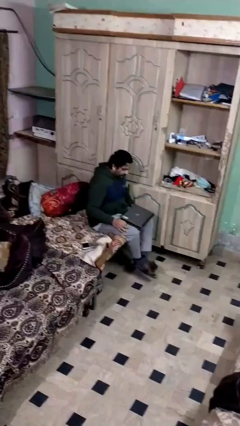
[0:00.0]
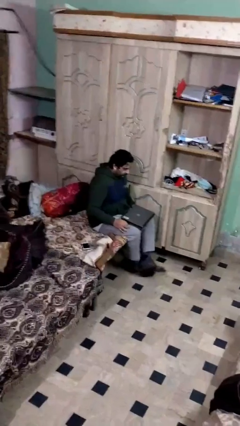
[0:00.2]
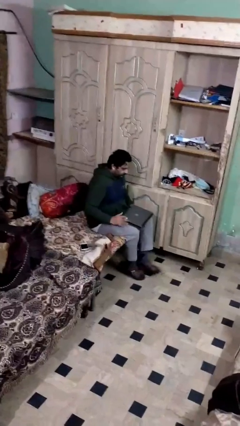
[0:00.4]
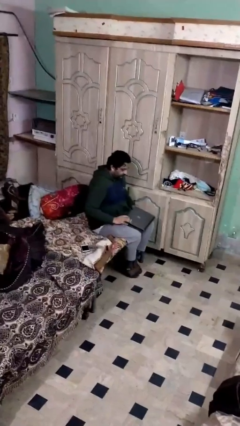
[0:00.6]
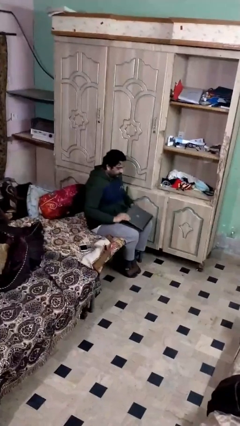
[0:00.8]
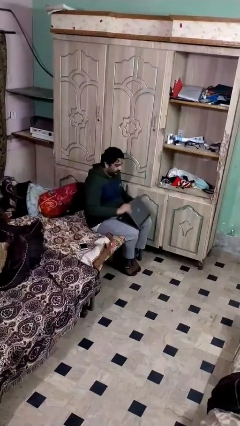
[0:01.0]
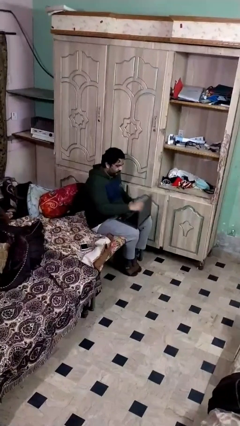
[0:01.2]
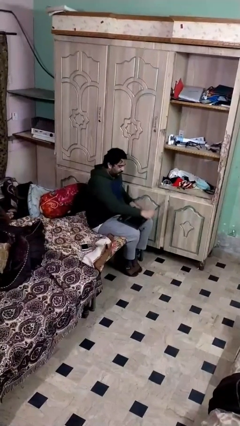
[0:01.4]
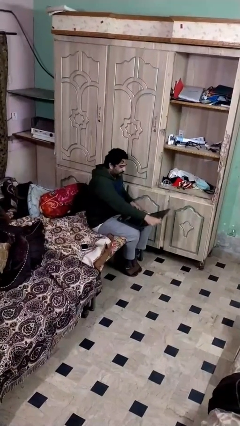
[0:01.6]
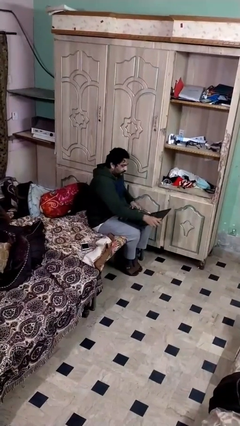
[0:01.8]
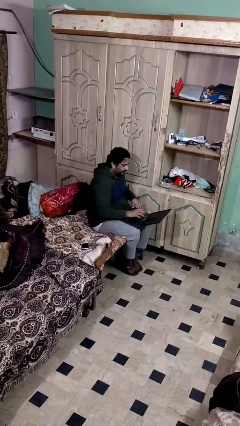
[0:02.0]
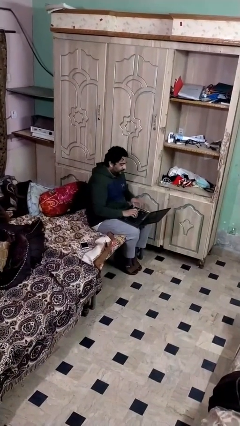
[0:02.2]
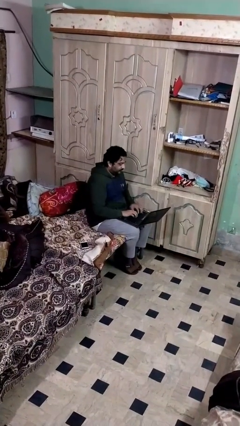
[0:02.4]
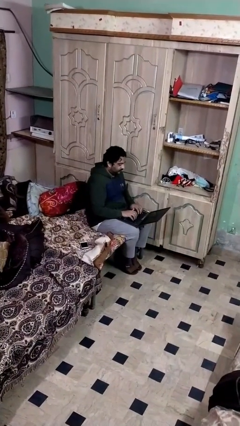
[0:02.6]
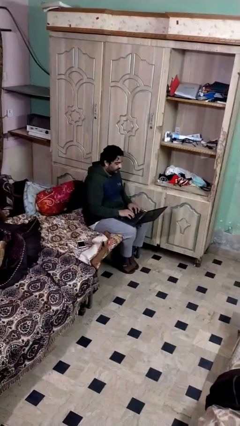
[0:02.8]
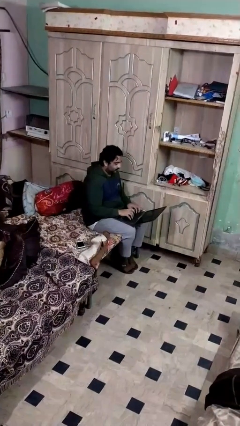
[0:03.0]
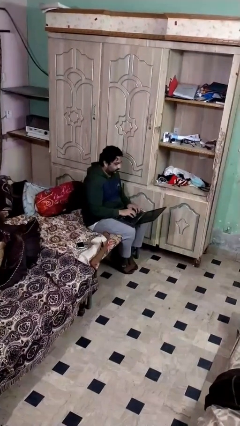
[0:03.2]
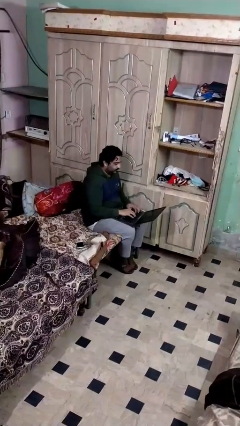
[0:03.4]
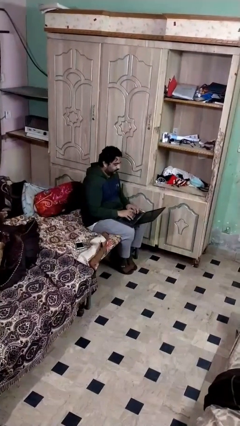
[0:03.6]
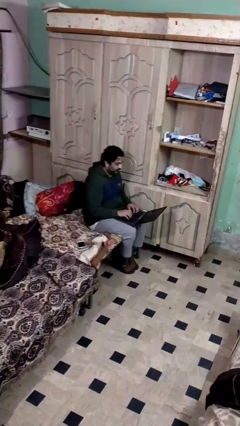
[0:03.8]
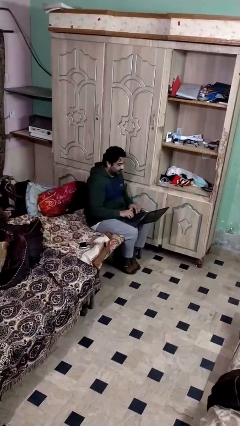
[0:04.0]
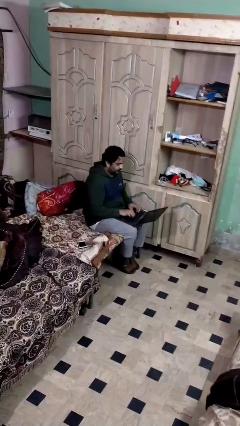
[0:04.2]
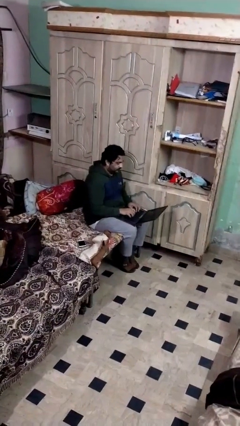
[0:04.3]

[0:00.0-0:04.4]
person interacts with laptop

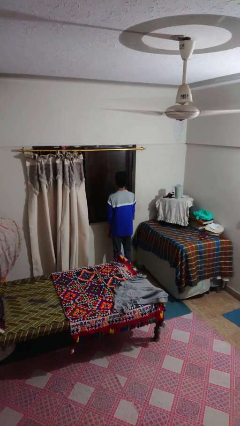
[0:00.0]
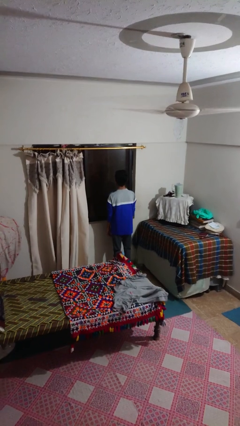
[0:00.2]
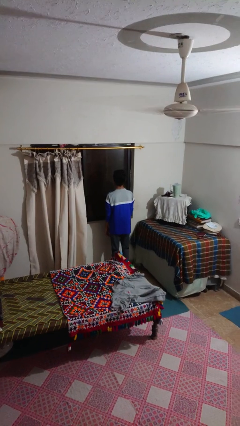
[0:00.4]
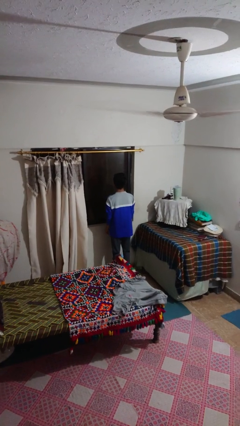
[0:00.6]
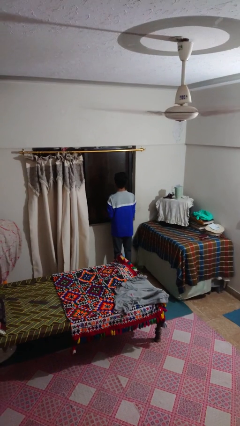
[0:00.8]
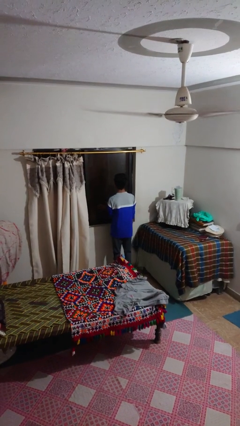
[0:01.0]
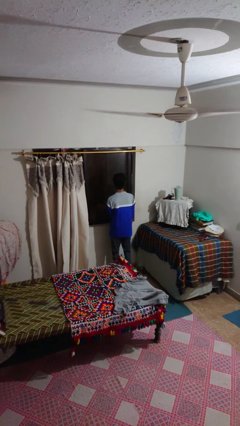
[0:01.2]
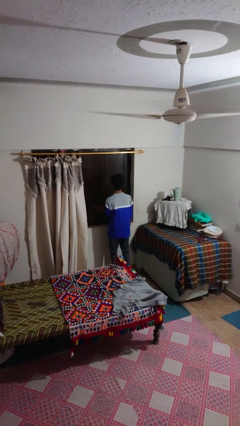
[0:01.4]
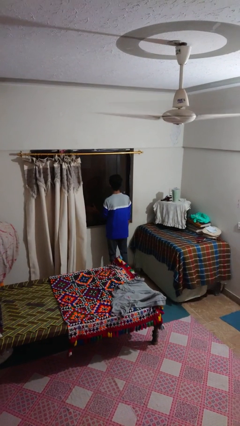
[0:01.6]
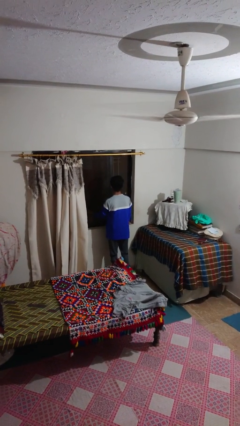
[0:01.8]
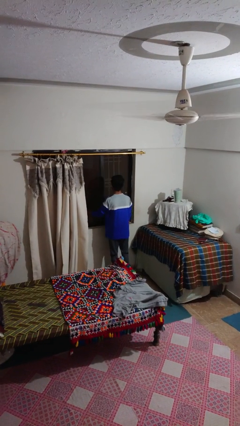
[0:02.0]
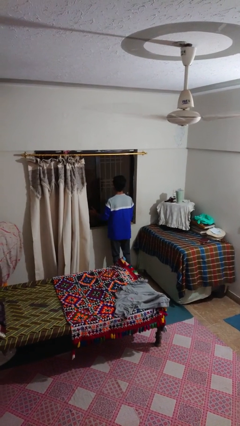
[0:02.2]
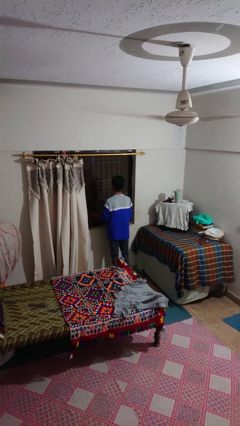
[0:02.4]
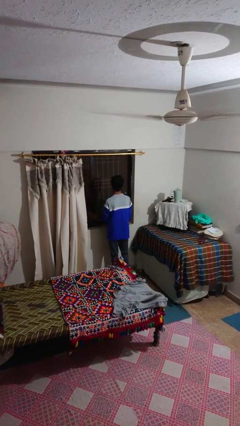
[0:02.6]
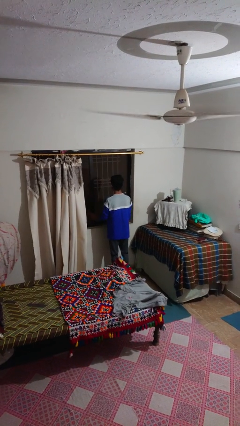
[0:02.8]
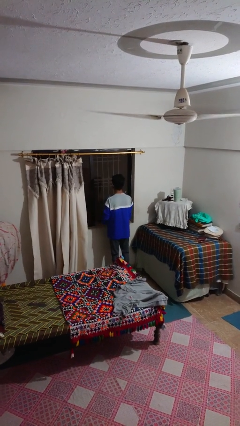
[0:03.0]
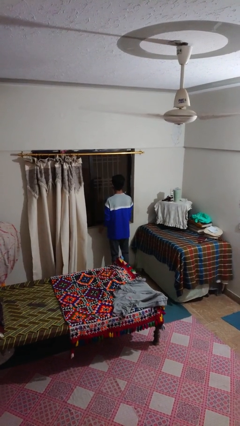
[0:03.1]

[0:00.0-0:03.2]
person opens home window

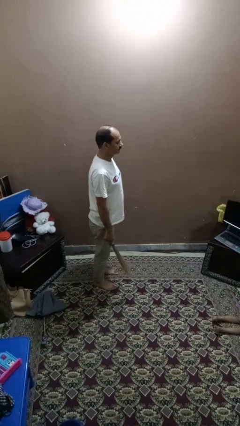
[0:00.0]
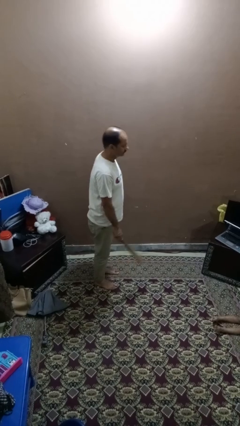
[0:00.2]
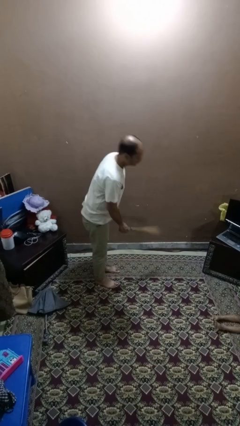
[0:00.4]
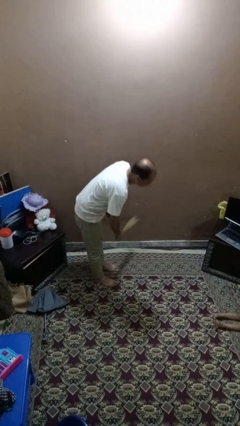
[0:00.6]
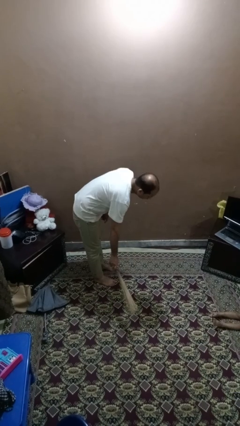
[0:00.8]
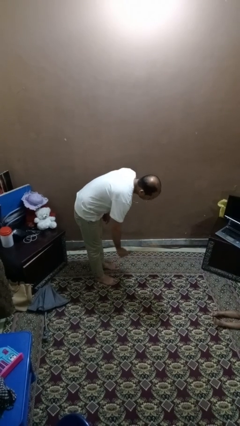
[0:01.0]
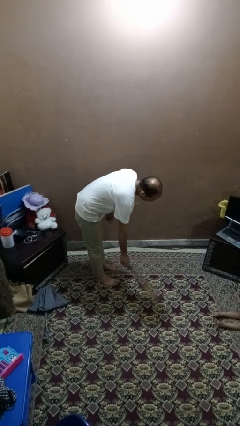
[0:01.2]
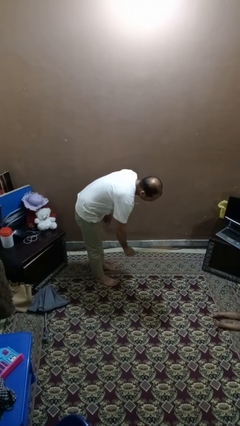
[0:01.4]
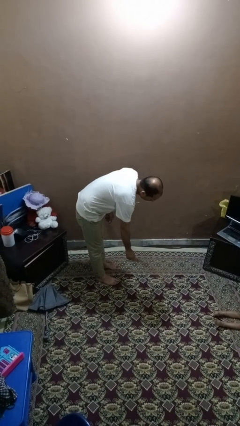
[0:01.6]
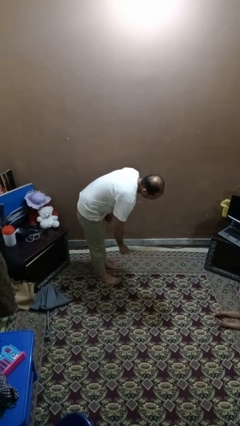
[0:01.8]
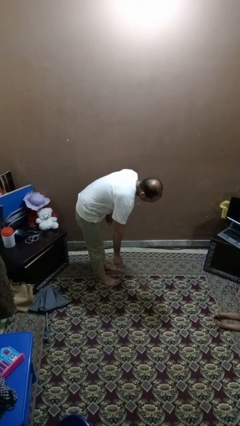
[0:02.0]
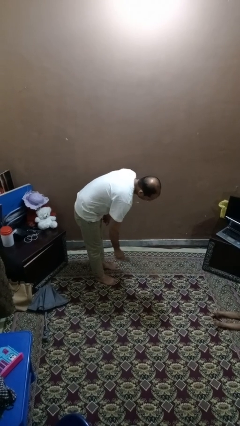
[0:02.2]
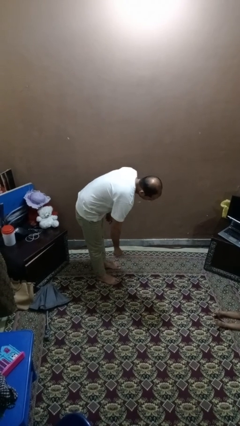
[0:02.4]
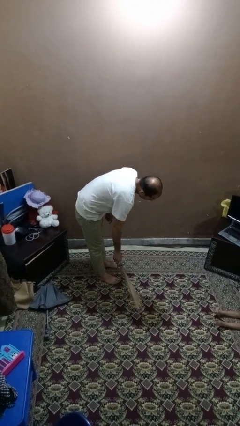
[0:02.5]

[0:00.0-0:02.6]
person sweeps floor

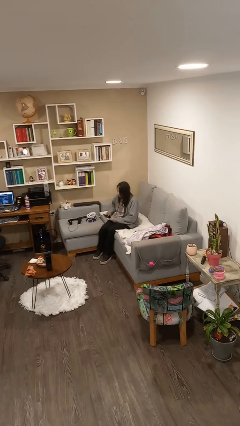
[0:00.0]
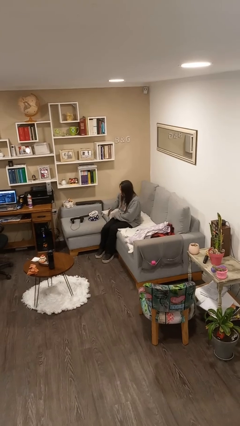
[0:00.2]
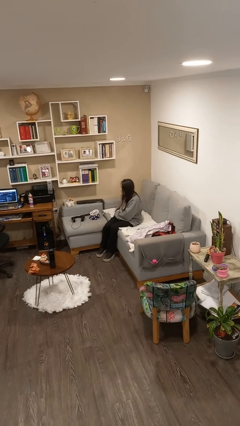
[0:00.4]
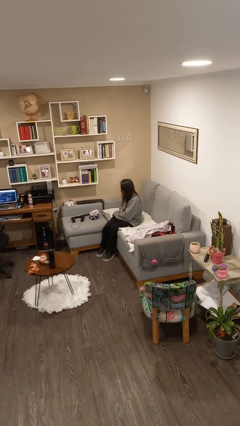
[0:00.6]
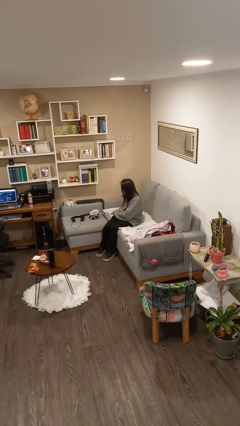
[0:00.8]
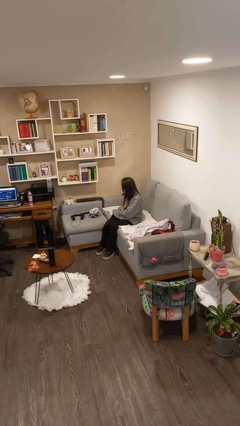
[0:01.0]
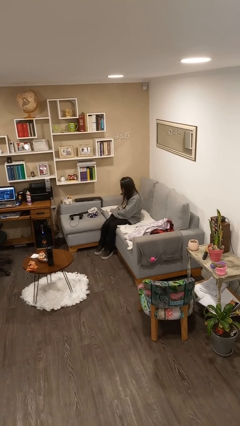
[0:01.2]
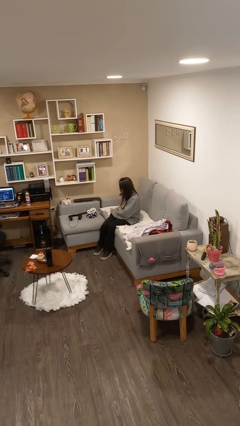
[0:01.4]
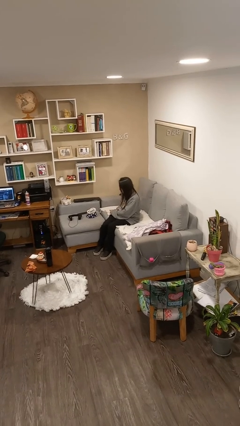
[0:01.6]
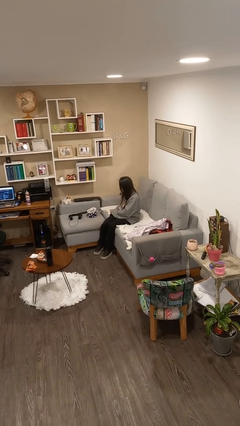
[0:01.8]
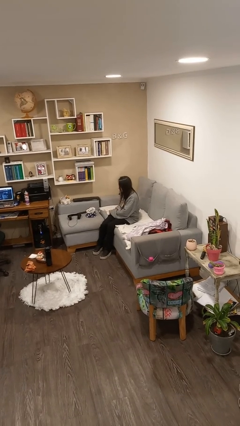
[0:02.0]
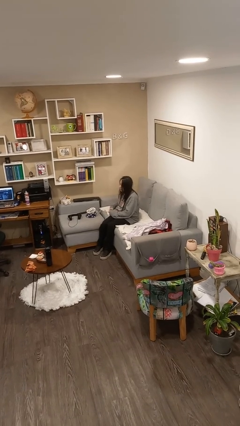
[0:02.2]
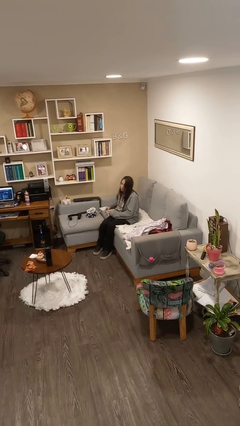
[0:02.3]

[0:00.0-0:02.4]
person puts phone into pocket

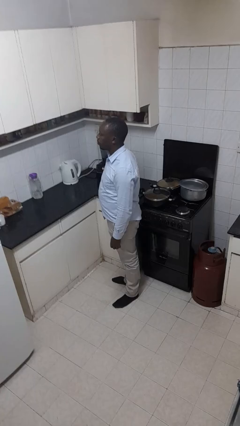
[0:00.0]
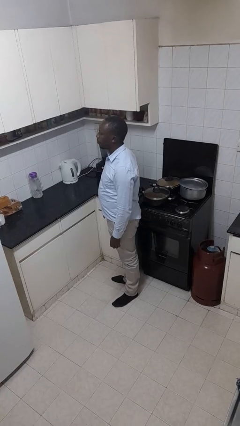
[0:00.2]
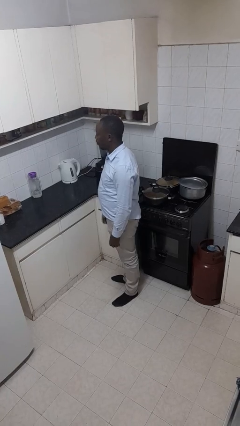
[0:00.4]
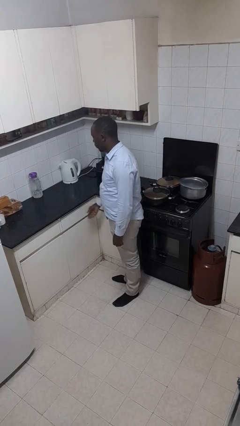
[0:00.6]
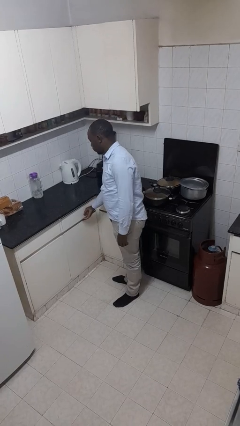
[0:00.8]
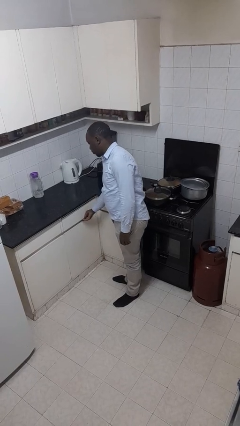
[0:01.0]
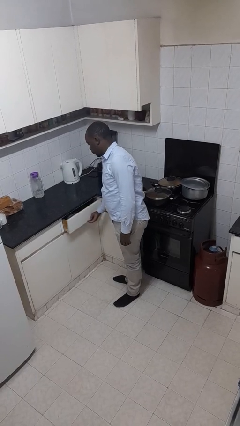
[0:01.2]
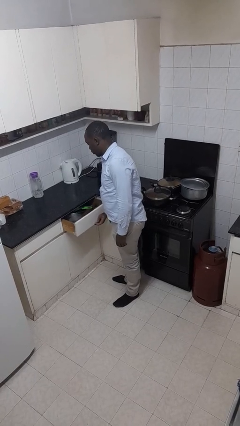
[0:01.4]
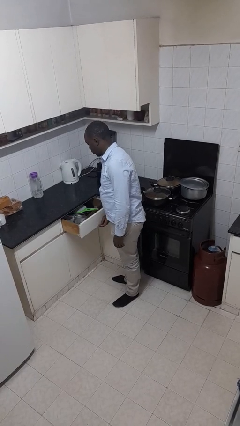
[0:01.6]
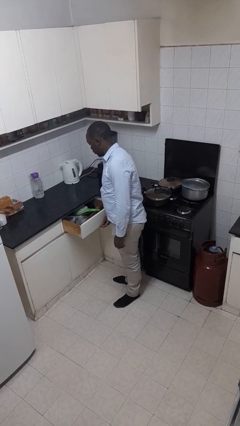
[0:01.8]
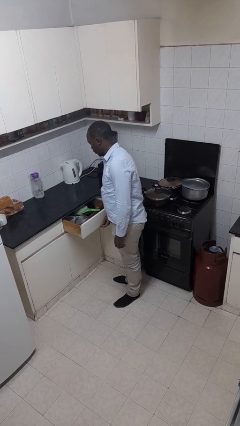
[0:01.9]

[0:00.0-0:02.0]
person opens kitchen drawer

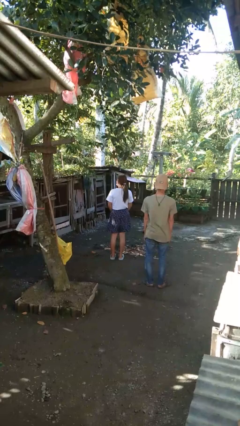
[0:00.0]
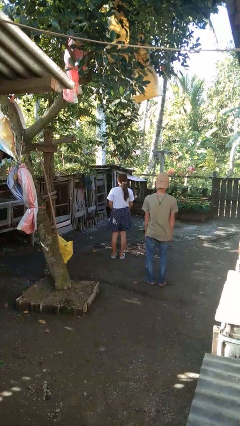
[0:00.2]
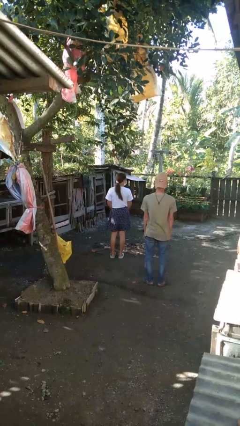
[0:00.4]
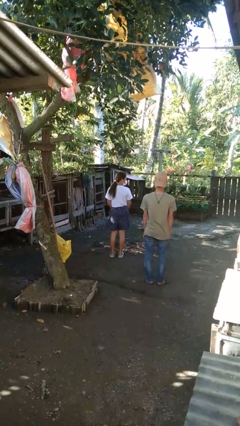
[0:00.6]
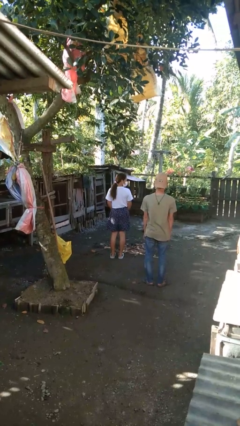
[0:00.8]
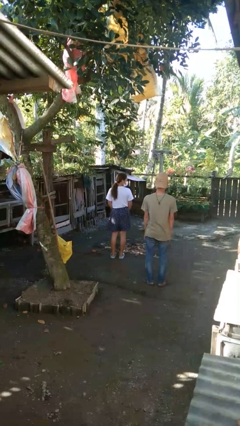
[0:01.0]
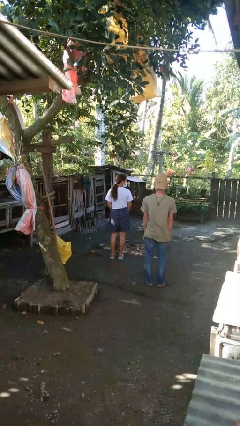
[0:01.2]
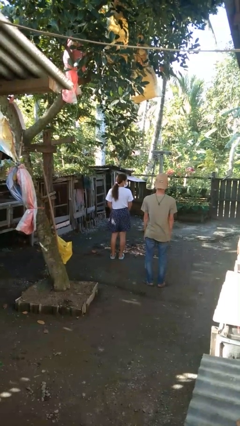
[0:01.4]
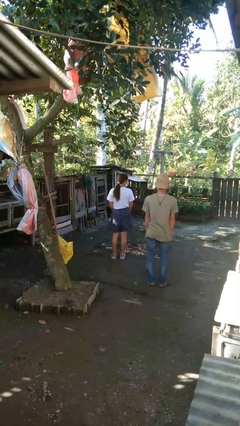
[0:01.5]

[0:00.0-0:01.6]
person looks over shoulder

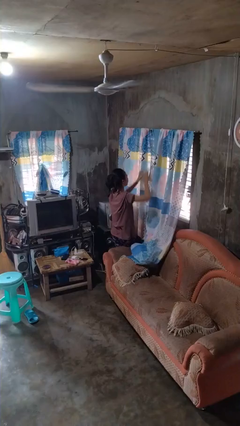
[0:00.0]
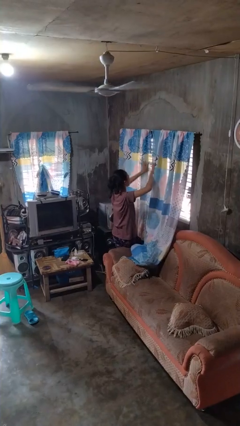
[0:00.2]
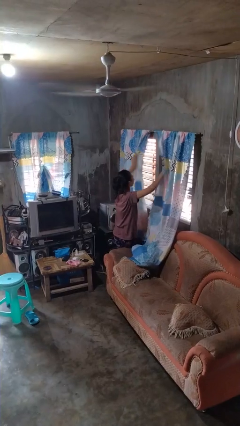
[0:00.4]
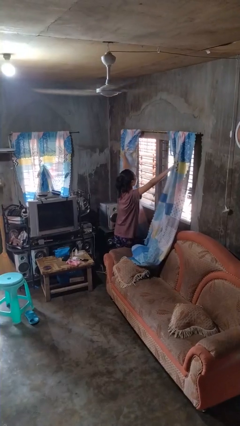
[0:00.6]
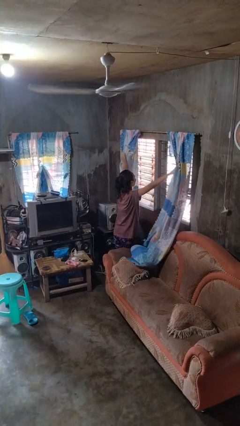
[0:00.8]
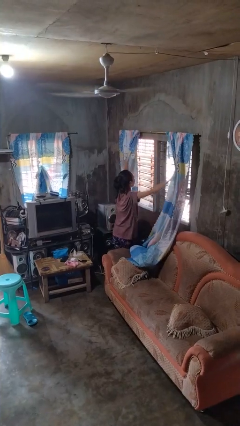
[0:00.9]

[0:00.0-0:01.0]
person opens curtains
